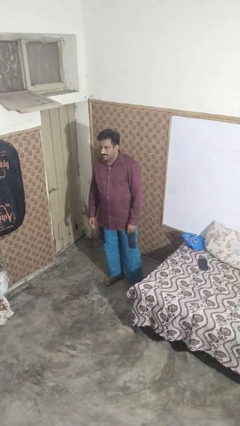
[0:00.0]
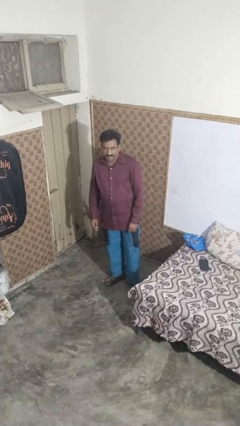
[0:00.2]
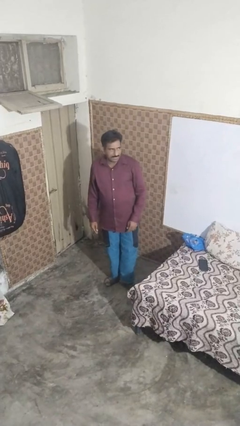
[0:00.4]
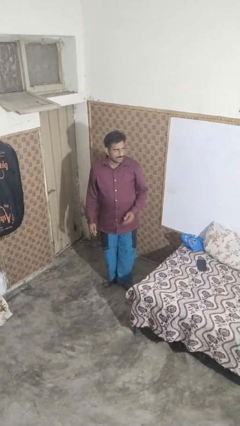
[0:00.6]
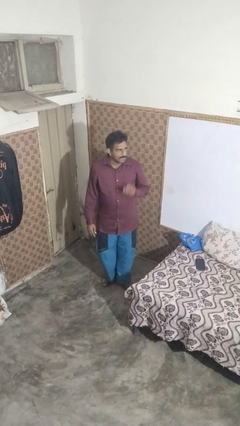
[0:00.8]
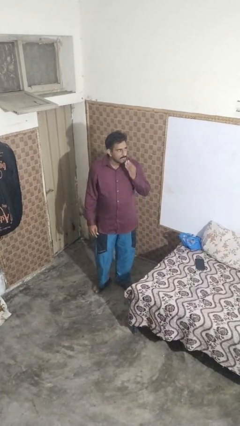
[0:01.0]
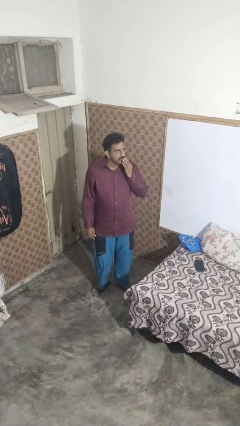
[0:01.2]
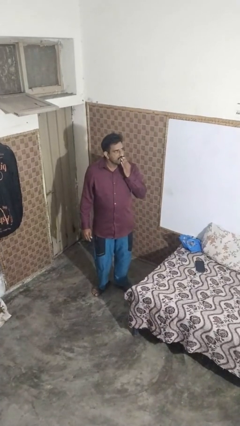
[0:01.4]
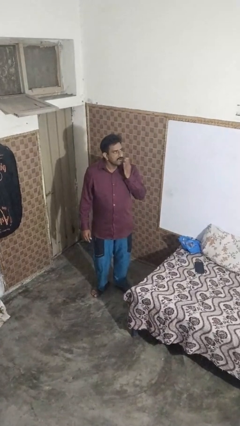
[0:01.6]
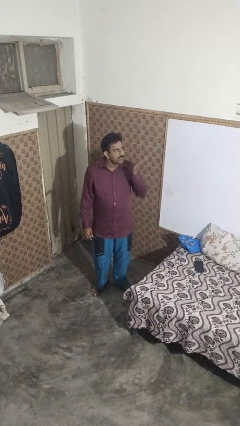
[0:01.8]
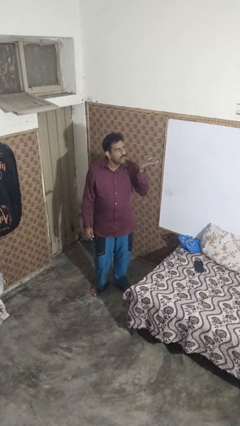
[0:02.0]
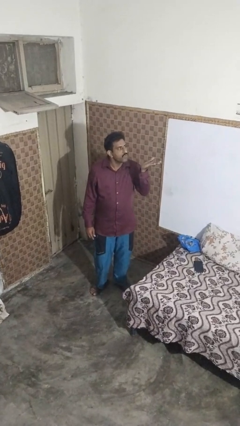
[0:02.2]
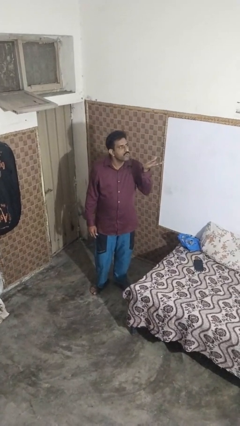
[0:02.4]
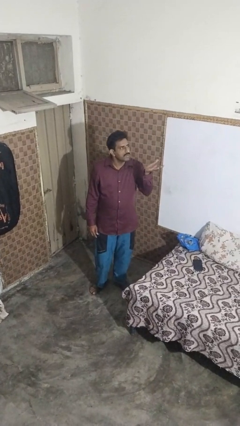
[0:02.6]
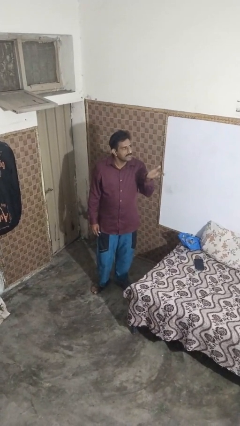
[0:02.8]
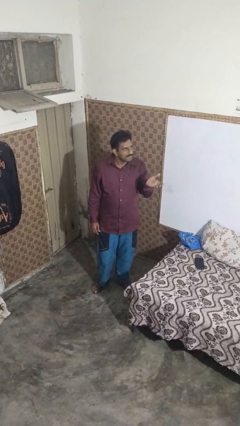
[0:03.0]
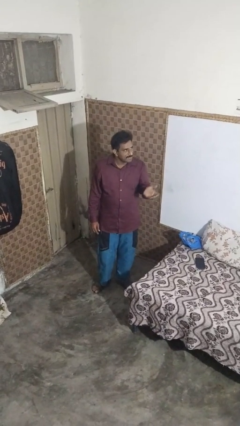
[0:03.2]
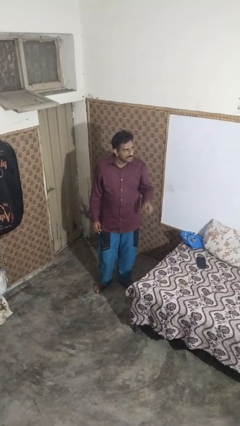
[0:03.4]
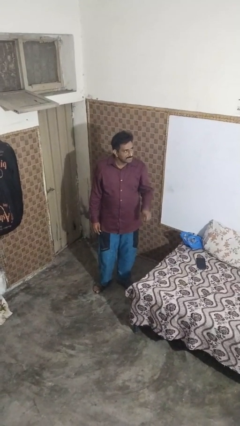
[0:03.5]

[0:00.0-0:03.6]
person gestures blow kiss

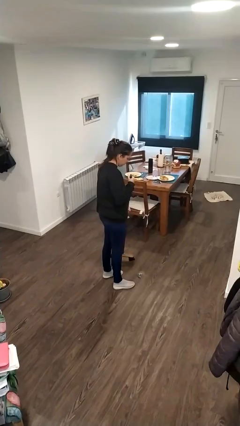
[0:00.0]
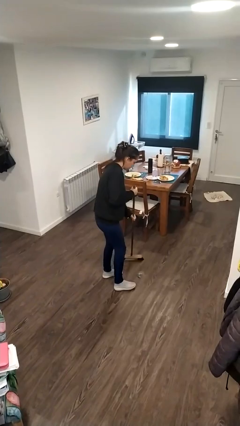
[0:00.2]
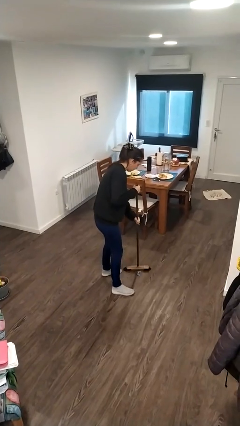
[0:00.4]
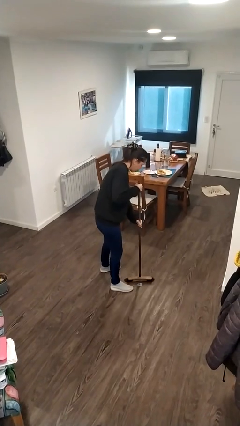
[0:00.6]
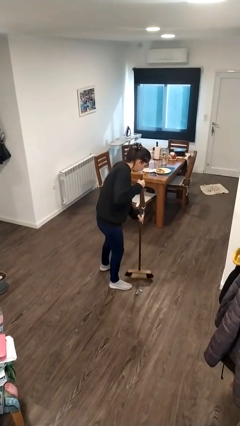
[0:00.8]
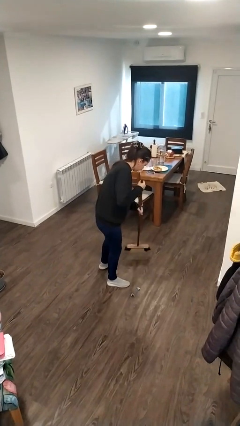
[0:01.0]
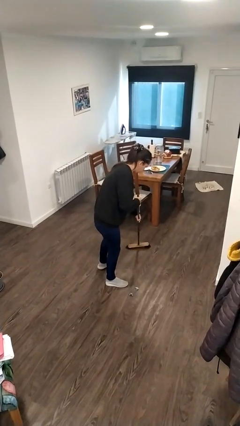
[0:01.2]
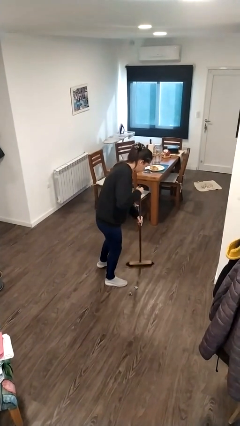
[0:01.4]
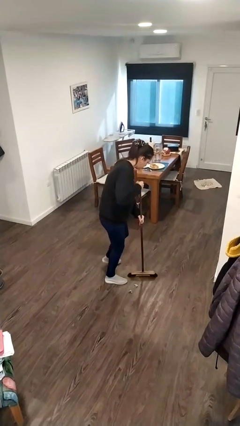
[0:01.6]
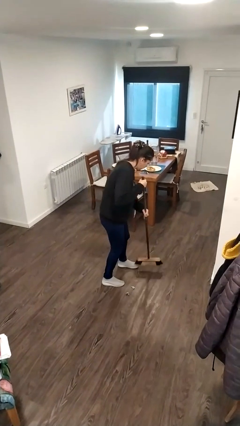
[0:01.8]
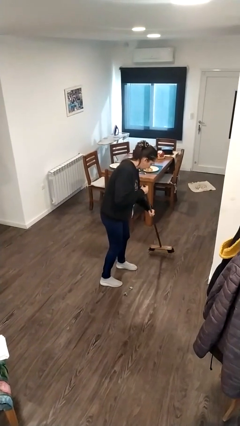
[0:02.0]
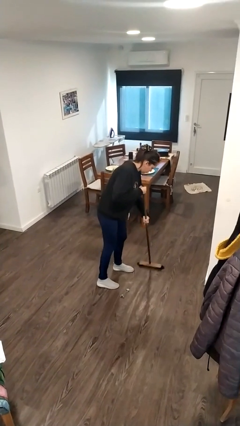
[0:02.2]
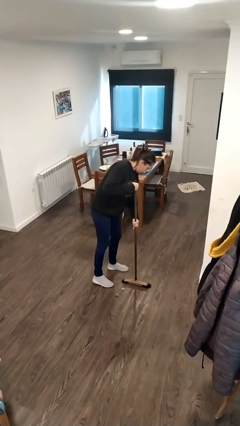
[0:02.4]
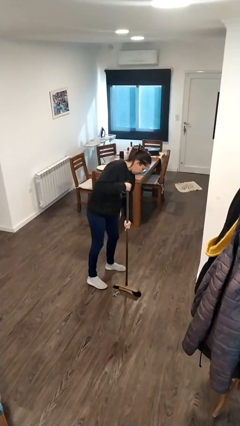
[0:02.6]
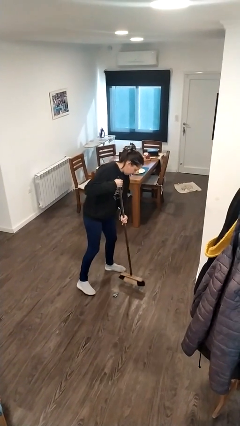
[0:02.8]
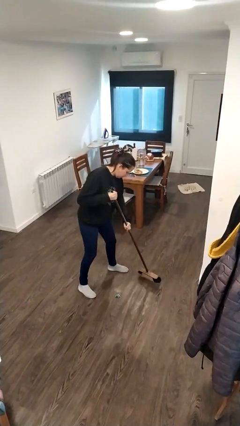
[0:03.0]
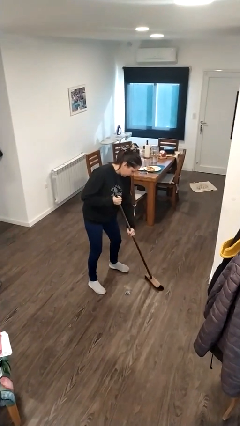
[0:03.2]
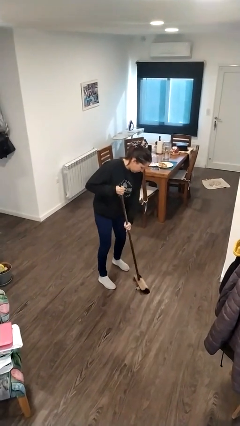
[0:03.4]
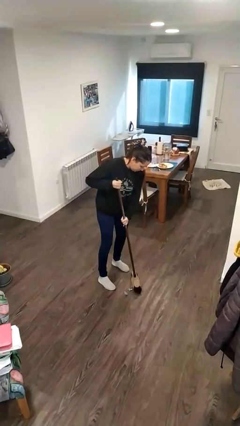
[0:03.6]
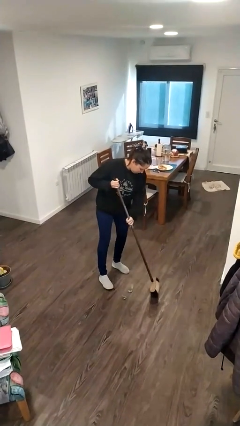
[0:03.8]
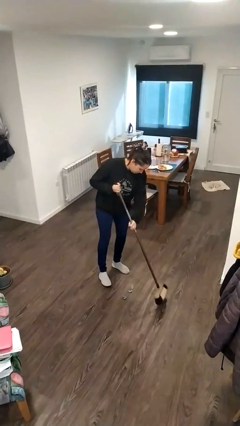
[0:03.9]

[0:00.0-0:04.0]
person sweeps floor

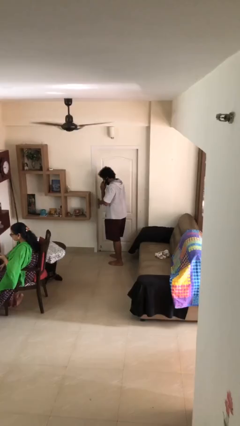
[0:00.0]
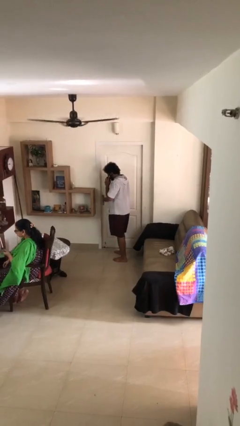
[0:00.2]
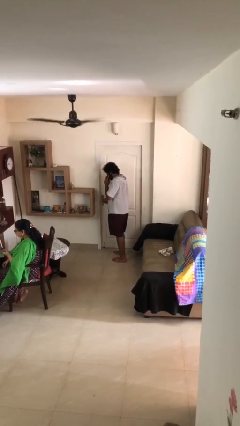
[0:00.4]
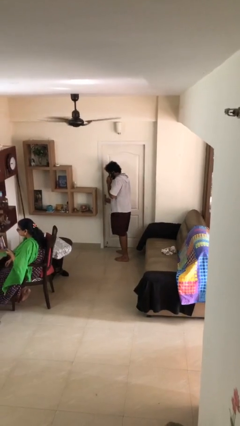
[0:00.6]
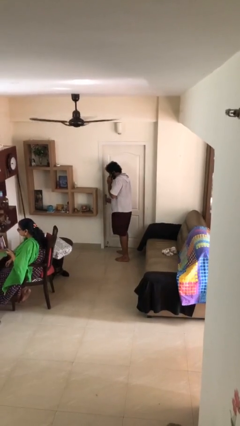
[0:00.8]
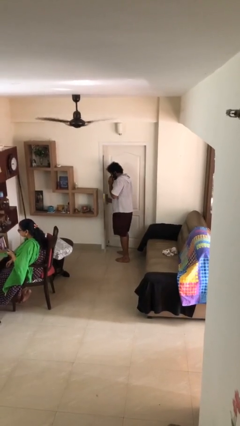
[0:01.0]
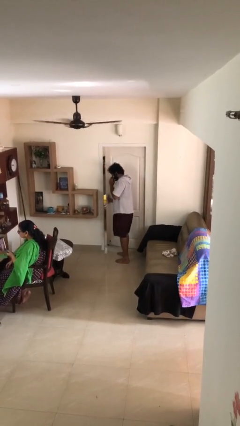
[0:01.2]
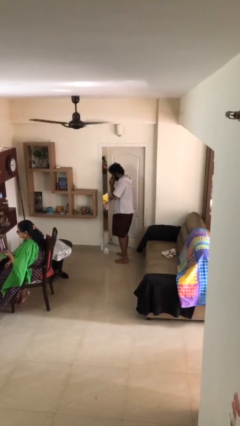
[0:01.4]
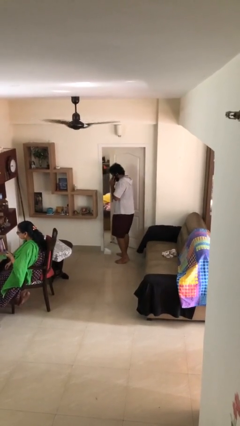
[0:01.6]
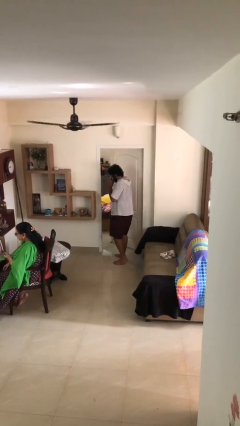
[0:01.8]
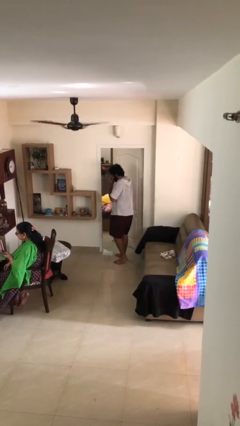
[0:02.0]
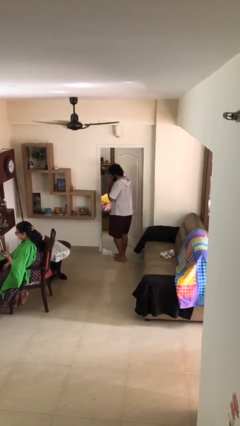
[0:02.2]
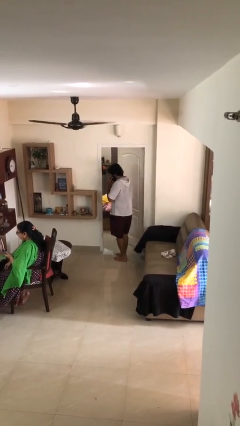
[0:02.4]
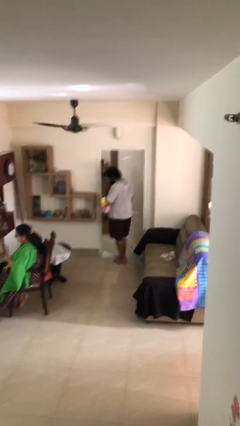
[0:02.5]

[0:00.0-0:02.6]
person opens facility door

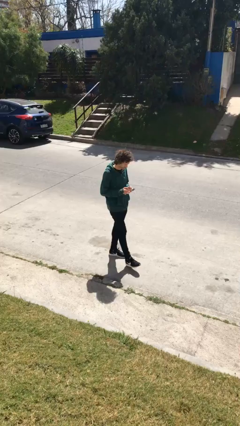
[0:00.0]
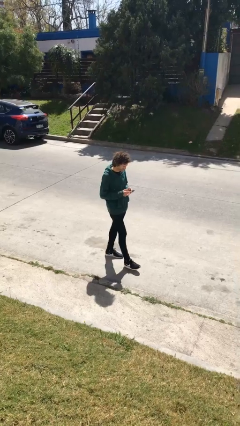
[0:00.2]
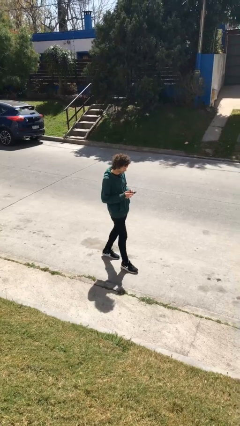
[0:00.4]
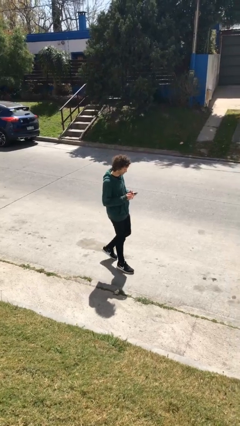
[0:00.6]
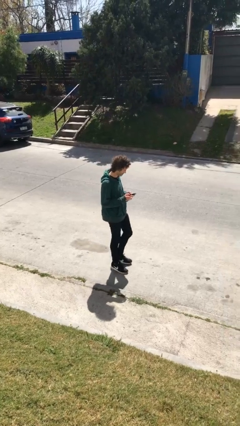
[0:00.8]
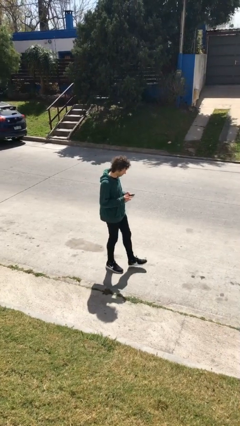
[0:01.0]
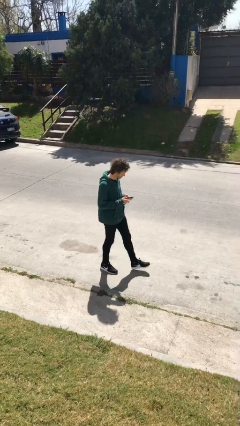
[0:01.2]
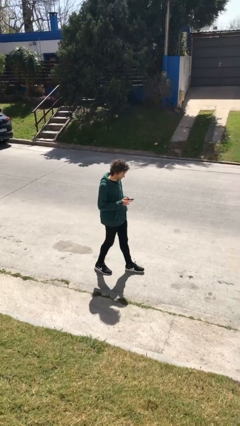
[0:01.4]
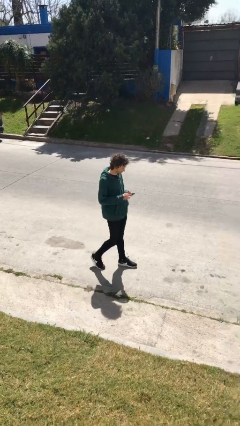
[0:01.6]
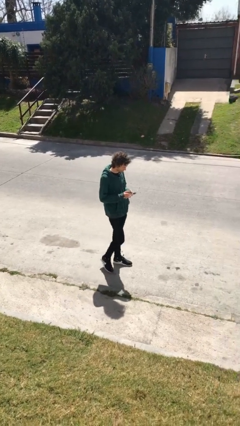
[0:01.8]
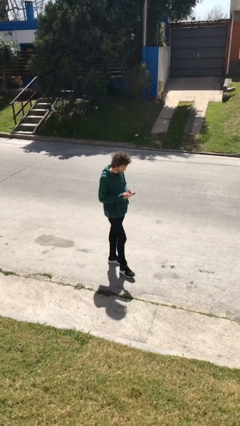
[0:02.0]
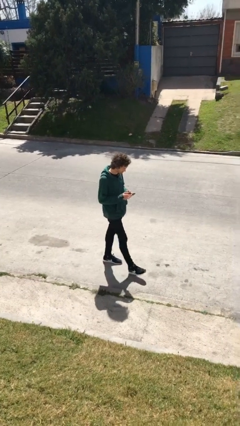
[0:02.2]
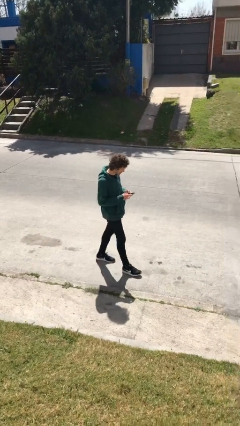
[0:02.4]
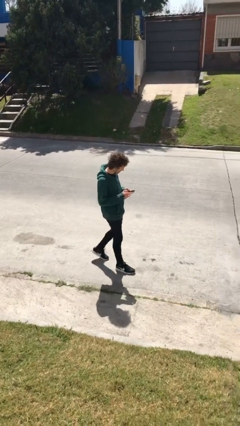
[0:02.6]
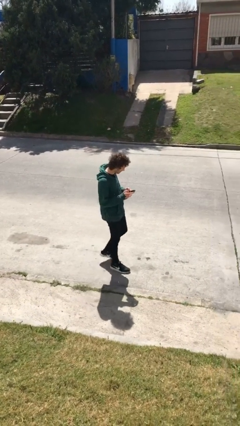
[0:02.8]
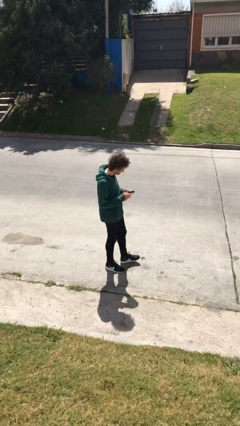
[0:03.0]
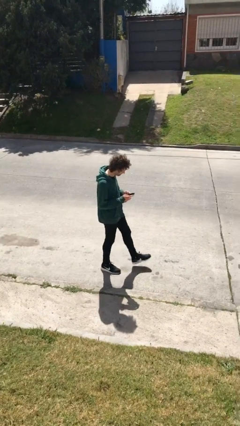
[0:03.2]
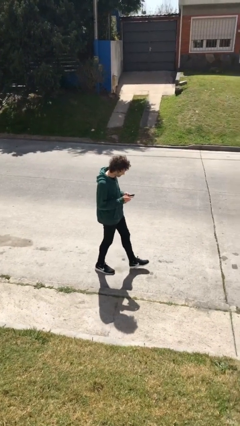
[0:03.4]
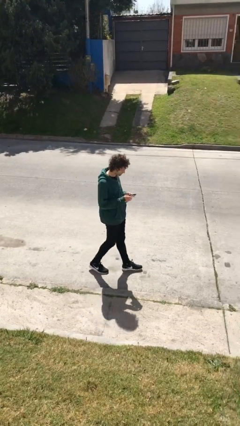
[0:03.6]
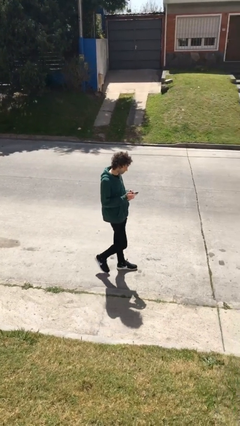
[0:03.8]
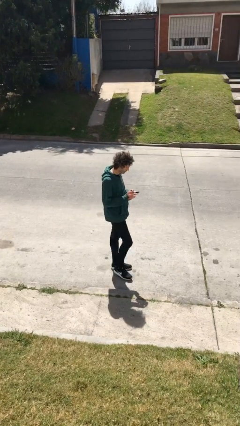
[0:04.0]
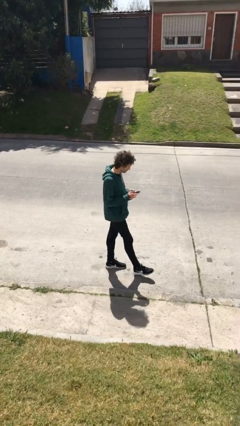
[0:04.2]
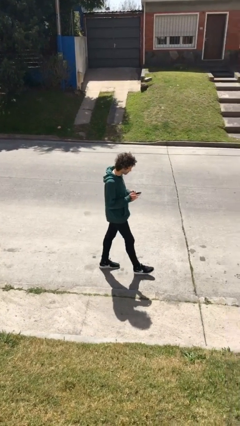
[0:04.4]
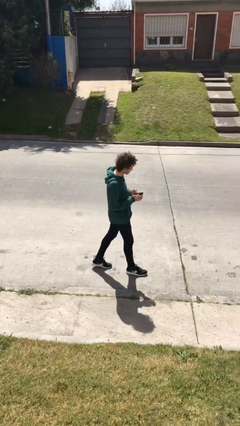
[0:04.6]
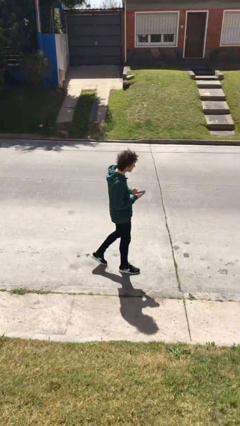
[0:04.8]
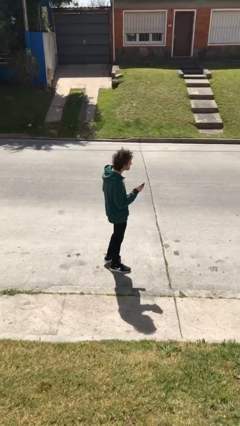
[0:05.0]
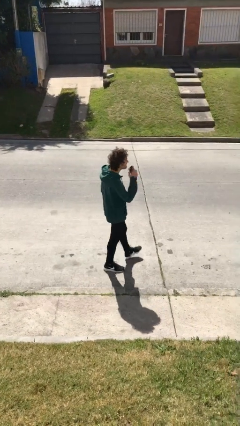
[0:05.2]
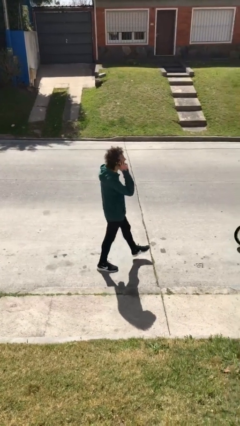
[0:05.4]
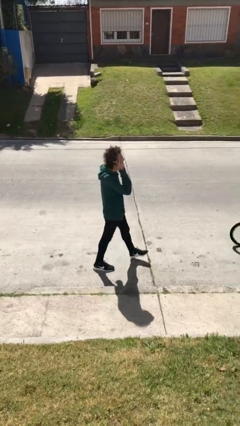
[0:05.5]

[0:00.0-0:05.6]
person texts on phone

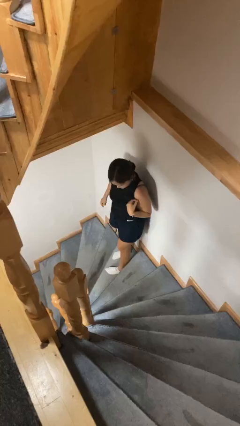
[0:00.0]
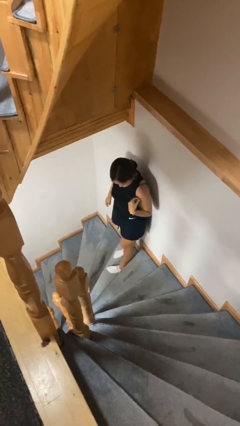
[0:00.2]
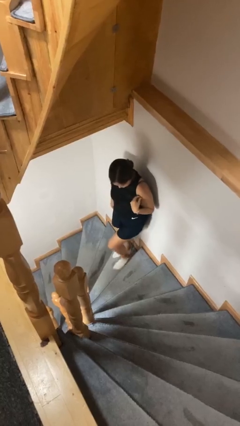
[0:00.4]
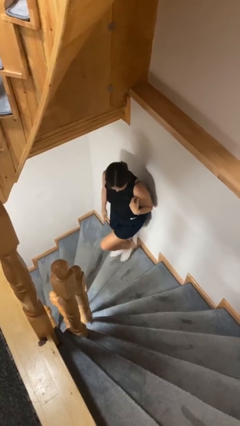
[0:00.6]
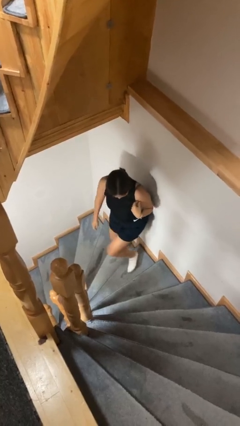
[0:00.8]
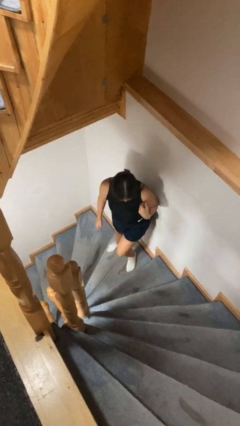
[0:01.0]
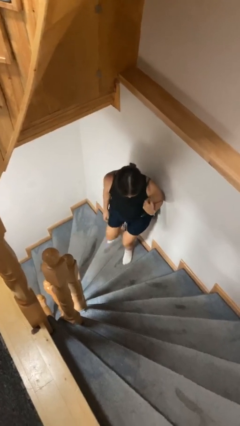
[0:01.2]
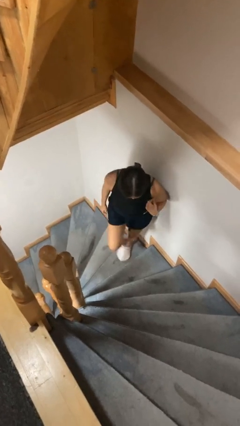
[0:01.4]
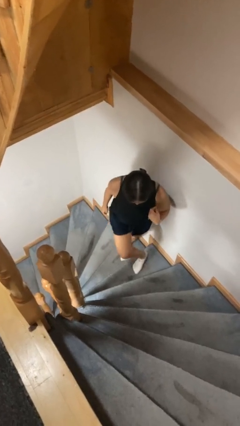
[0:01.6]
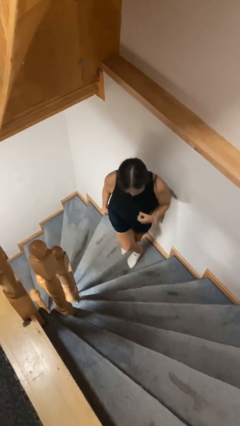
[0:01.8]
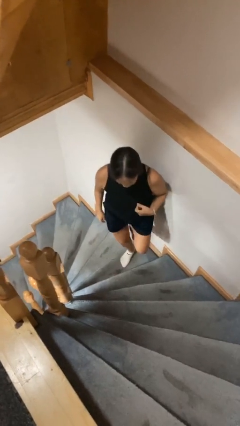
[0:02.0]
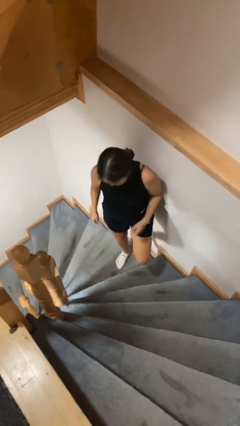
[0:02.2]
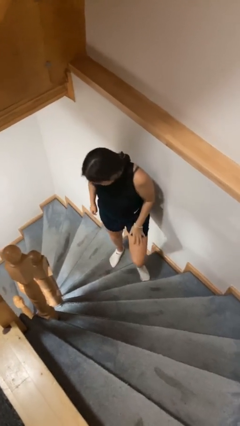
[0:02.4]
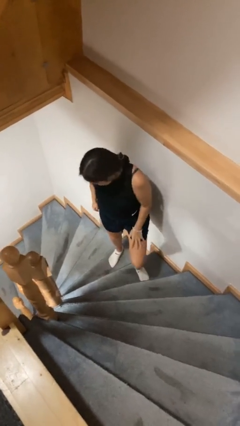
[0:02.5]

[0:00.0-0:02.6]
person climbs up stairs
